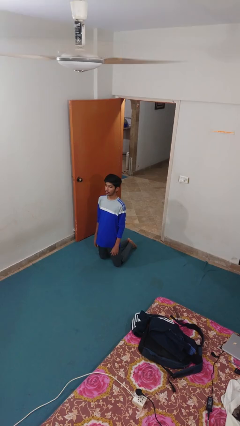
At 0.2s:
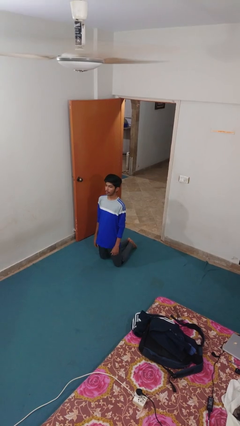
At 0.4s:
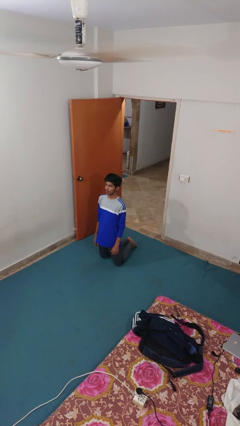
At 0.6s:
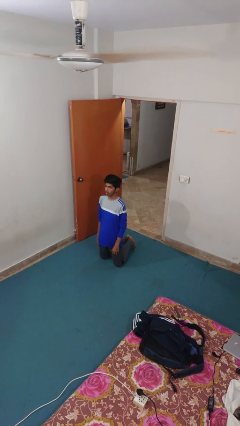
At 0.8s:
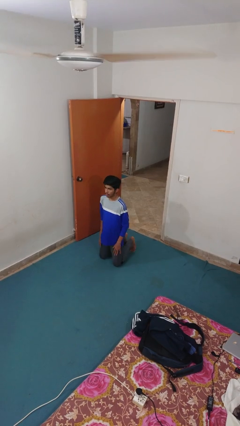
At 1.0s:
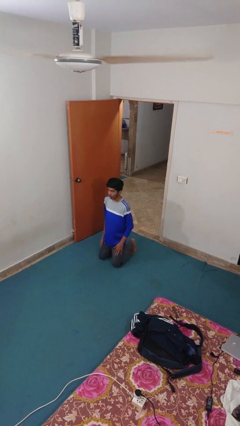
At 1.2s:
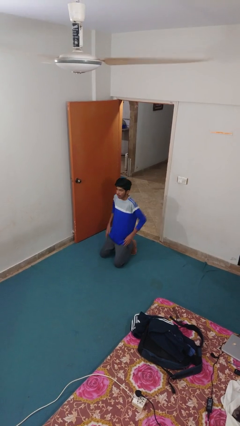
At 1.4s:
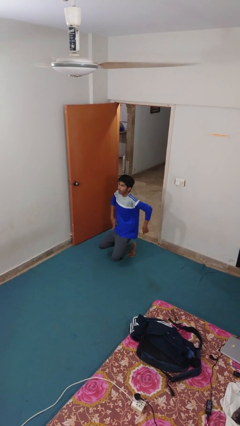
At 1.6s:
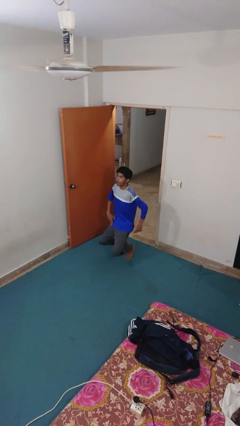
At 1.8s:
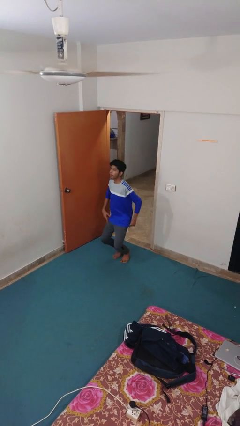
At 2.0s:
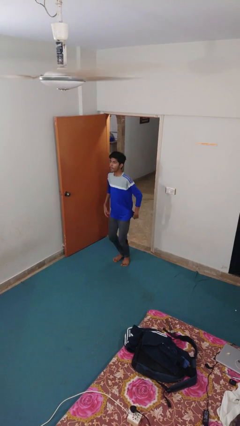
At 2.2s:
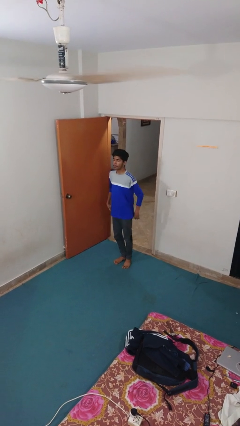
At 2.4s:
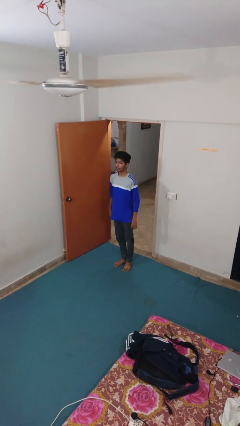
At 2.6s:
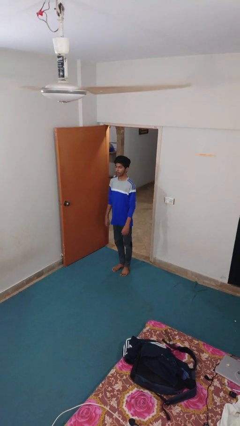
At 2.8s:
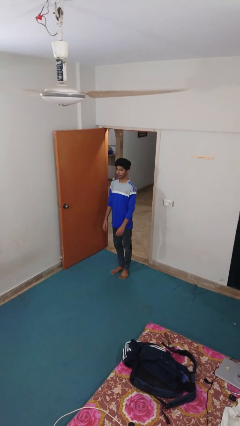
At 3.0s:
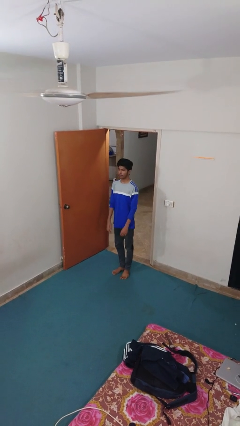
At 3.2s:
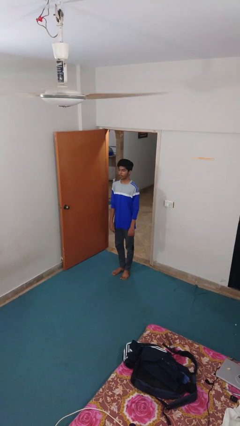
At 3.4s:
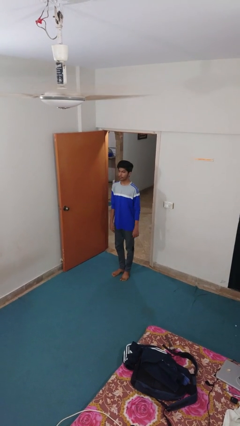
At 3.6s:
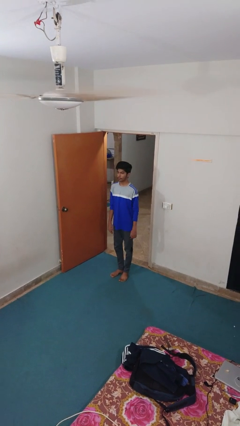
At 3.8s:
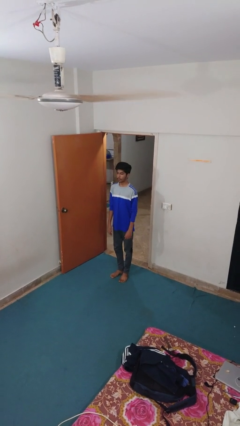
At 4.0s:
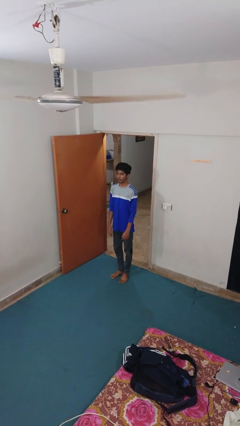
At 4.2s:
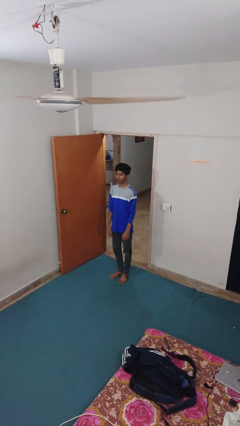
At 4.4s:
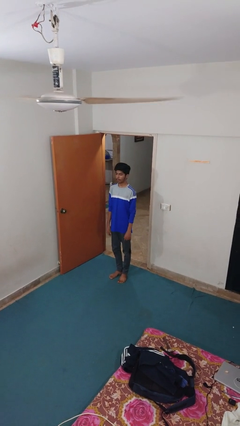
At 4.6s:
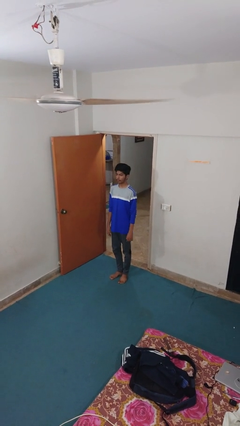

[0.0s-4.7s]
person stands up from floor

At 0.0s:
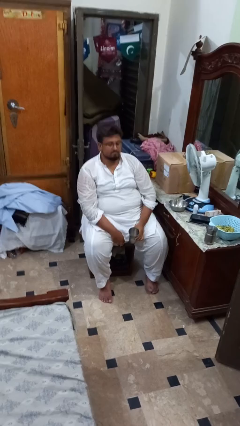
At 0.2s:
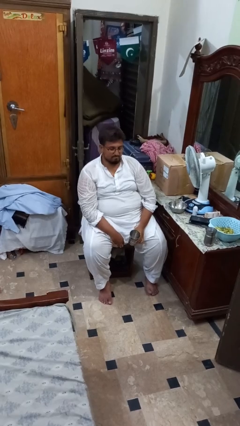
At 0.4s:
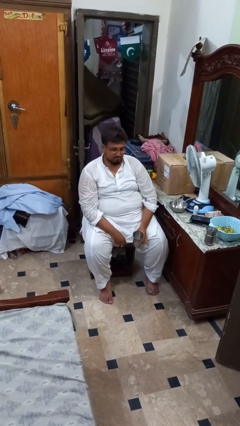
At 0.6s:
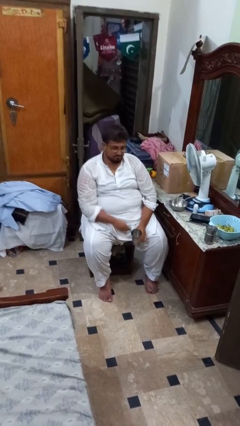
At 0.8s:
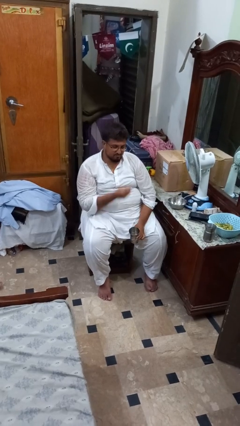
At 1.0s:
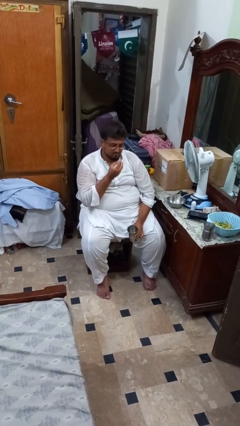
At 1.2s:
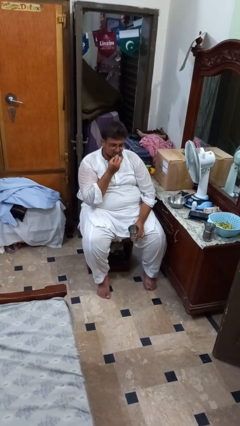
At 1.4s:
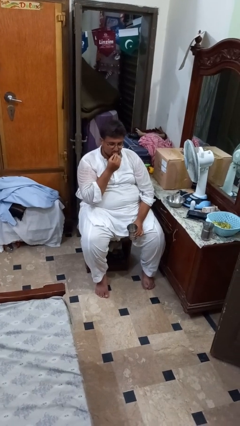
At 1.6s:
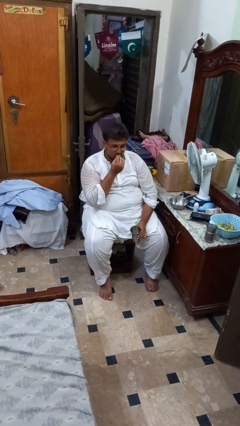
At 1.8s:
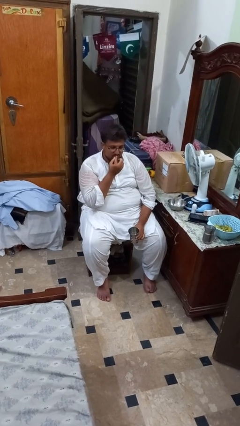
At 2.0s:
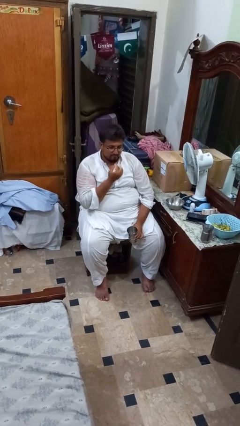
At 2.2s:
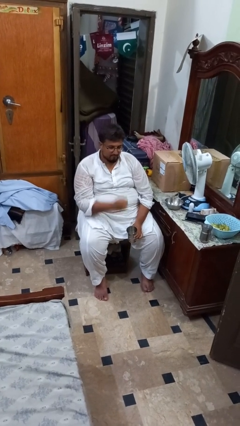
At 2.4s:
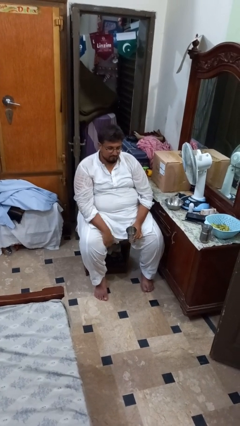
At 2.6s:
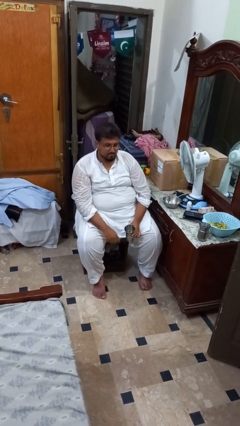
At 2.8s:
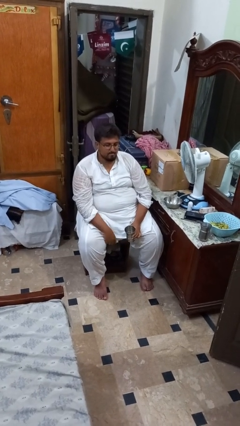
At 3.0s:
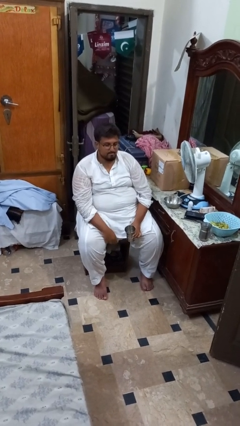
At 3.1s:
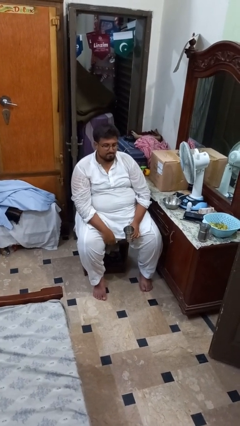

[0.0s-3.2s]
person takes medicine pills

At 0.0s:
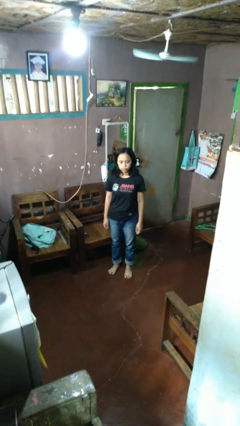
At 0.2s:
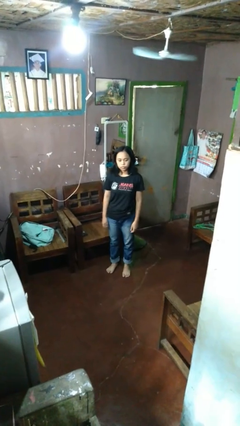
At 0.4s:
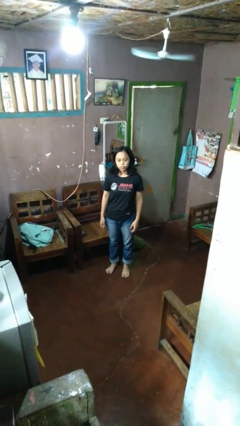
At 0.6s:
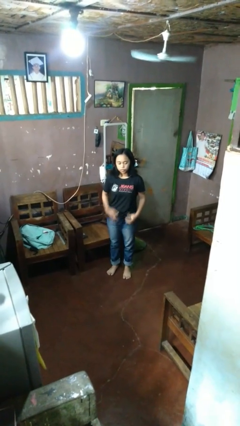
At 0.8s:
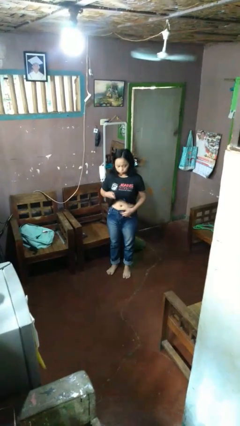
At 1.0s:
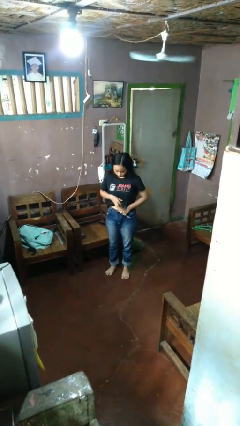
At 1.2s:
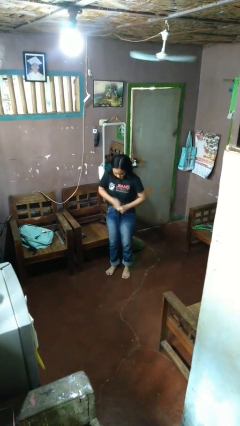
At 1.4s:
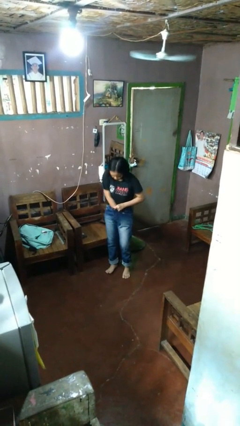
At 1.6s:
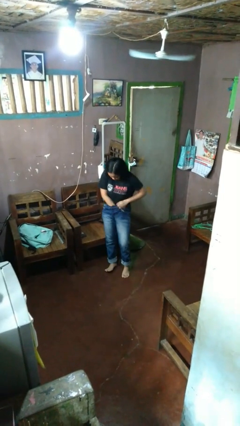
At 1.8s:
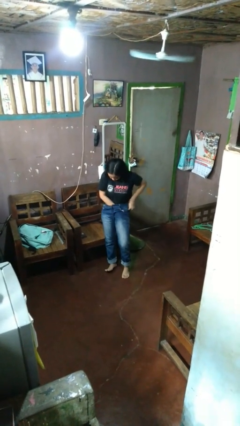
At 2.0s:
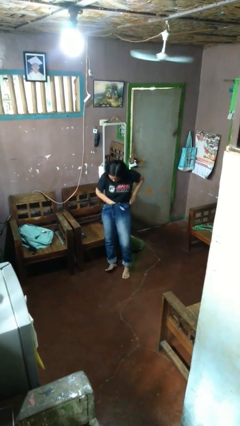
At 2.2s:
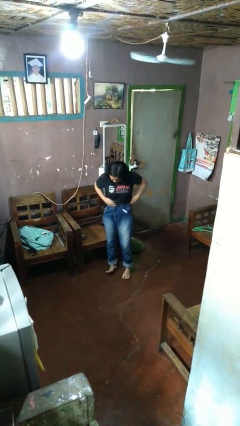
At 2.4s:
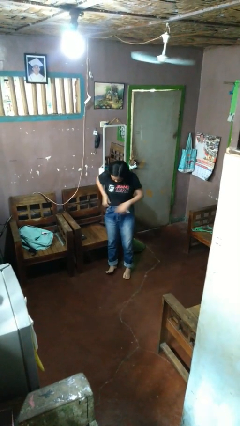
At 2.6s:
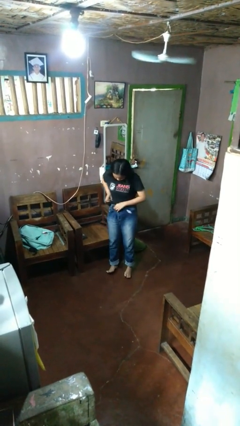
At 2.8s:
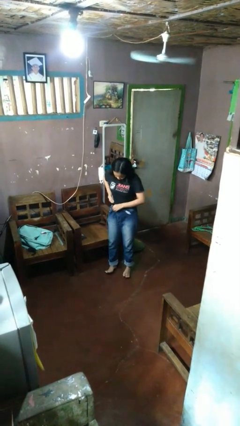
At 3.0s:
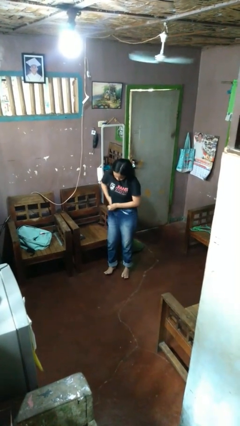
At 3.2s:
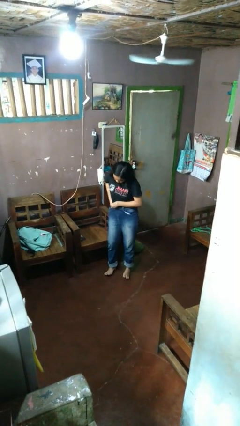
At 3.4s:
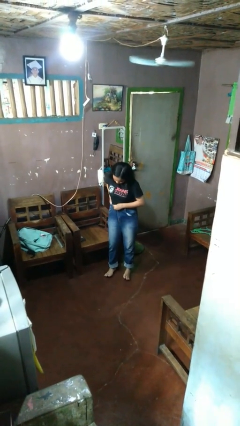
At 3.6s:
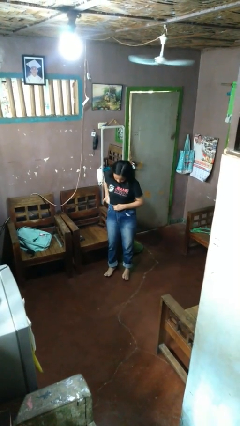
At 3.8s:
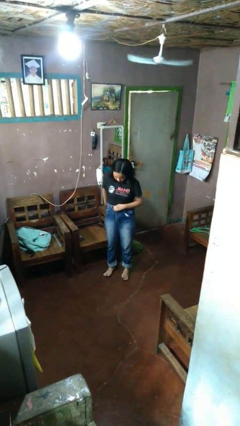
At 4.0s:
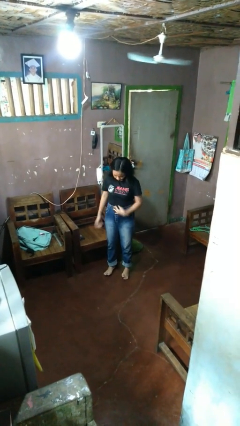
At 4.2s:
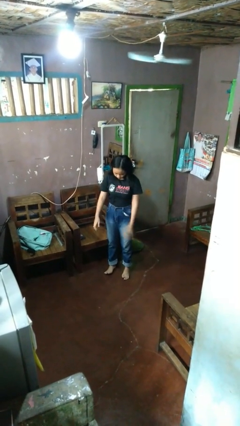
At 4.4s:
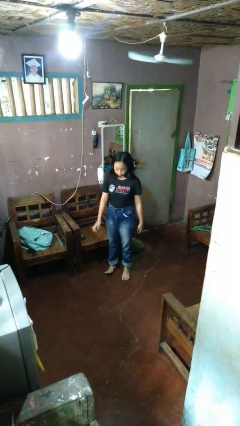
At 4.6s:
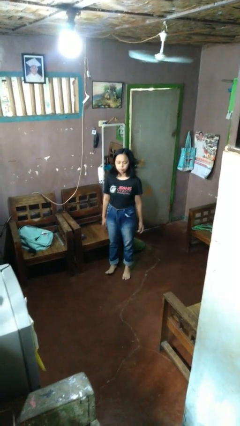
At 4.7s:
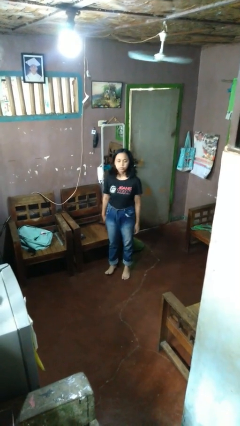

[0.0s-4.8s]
person tucks in shirt

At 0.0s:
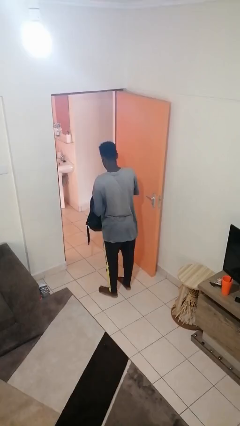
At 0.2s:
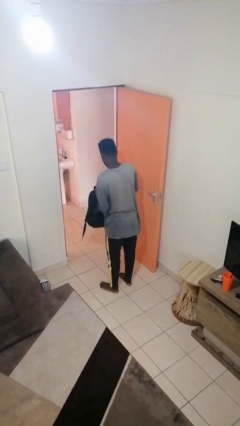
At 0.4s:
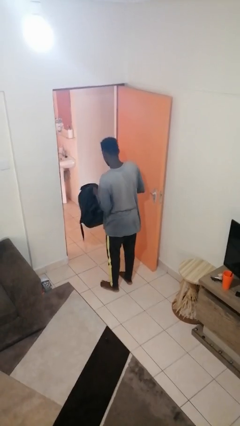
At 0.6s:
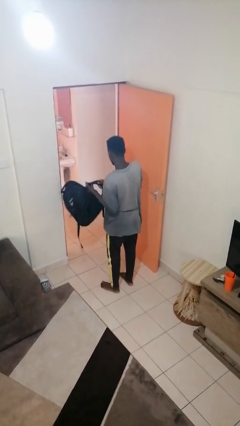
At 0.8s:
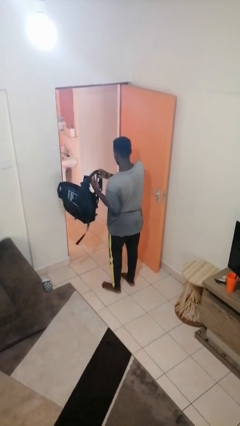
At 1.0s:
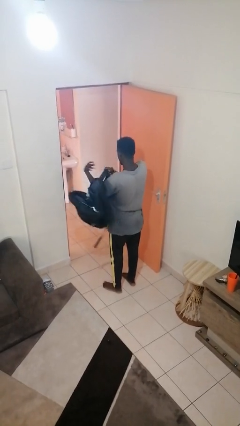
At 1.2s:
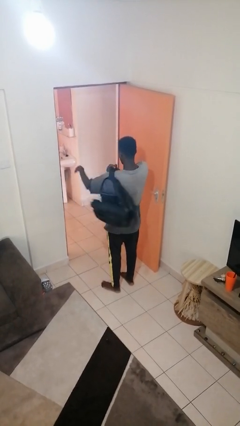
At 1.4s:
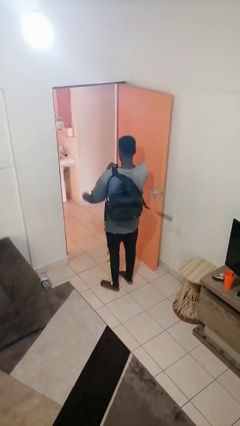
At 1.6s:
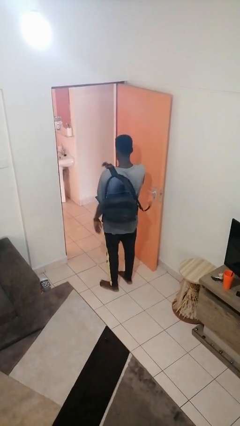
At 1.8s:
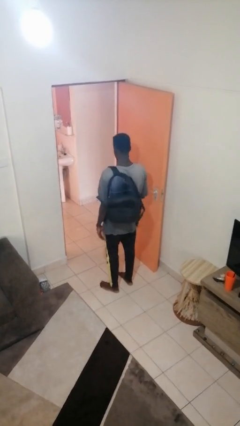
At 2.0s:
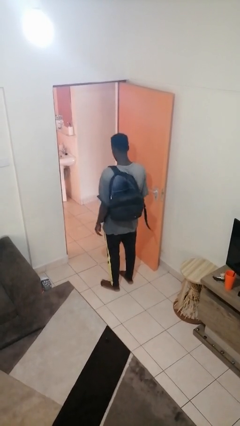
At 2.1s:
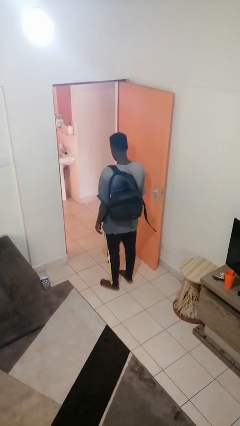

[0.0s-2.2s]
person puts object into backpack

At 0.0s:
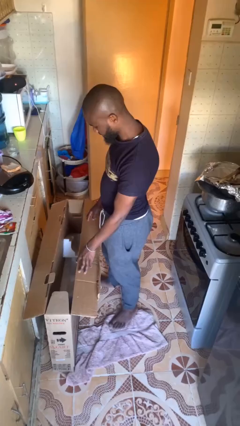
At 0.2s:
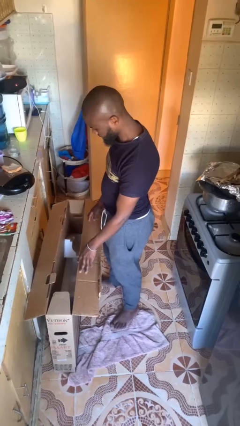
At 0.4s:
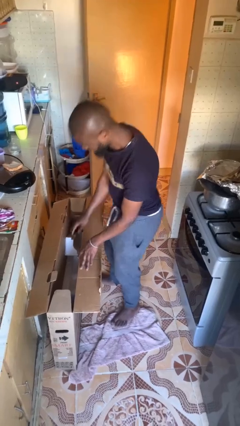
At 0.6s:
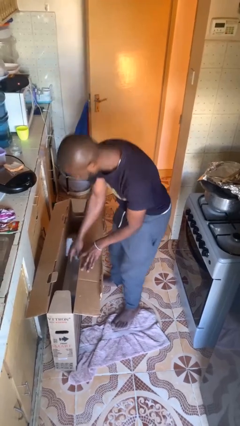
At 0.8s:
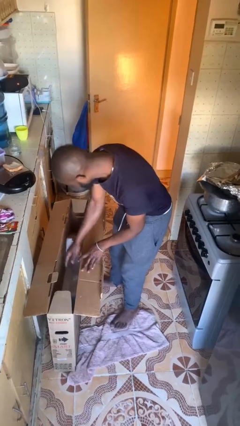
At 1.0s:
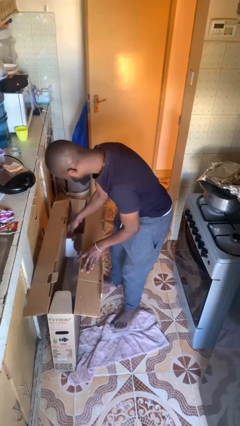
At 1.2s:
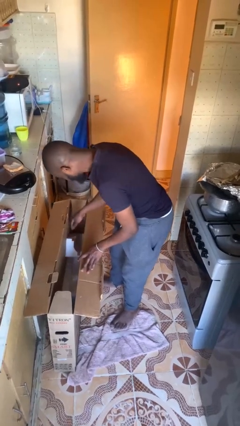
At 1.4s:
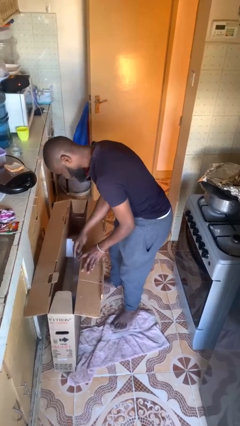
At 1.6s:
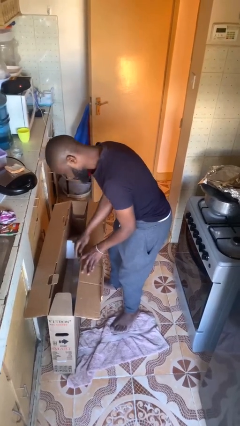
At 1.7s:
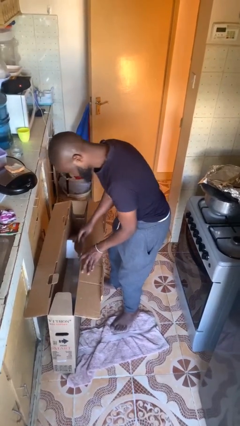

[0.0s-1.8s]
person searches in box

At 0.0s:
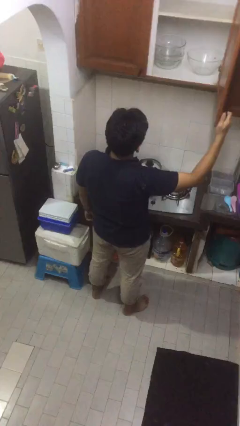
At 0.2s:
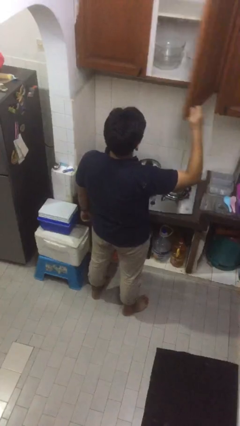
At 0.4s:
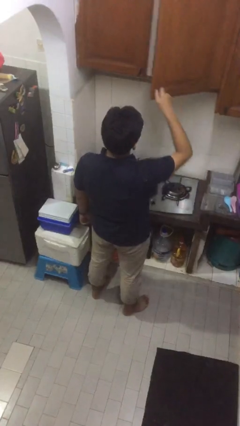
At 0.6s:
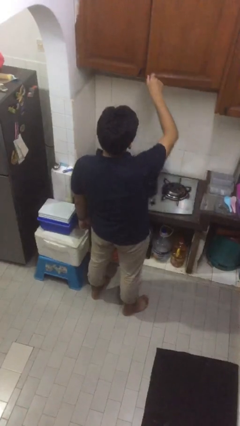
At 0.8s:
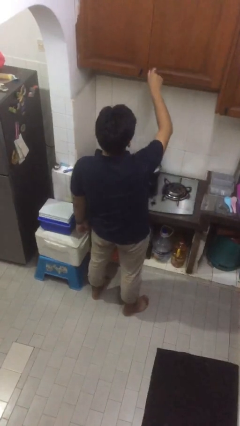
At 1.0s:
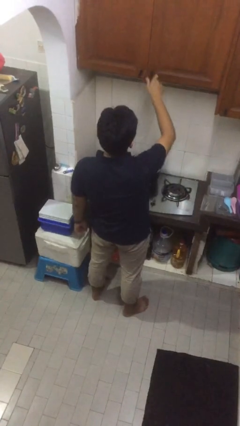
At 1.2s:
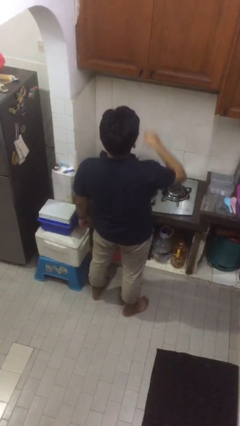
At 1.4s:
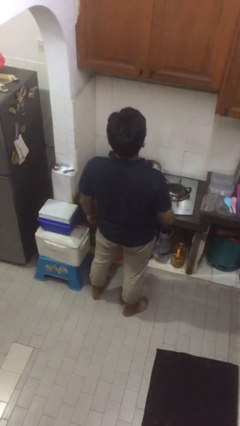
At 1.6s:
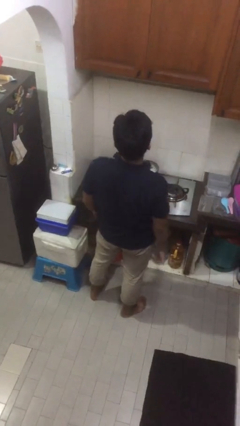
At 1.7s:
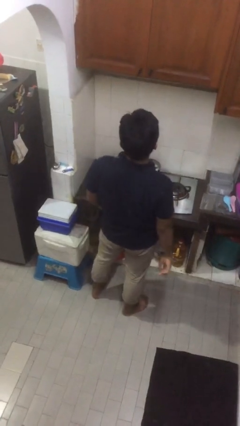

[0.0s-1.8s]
person closes cabinet
